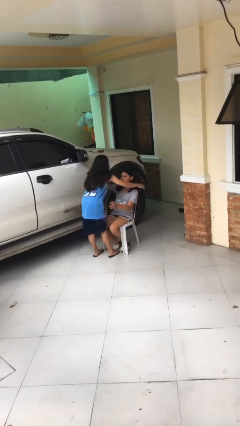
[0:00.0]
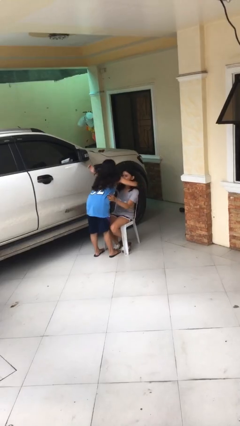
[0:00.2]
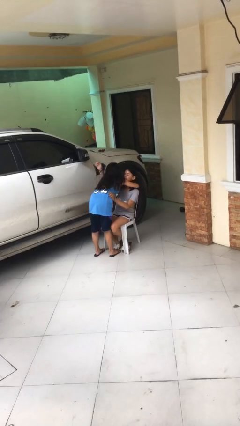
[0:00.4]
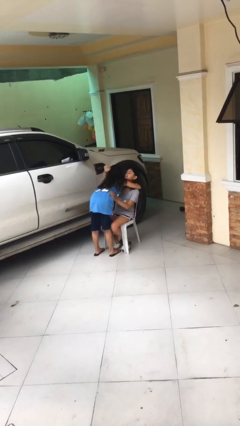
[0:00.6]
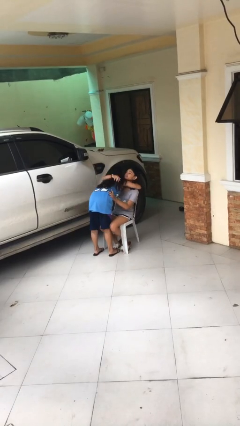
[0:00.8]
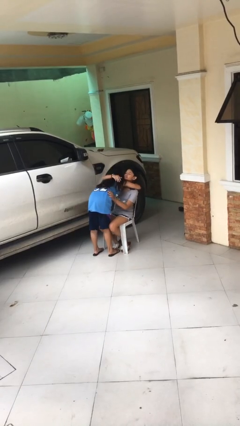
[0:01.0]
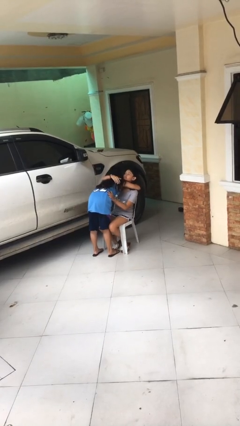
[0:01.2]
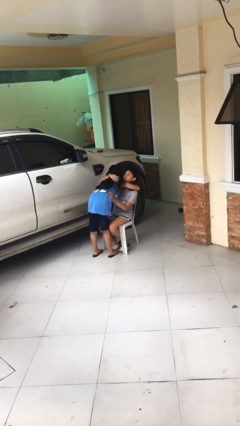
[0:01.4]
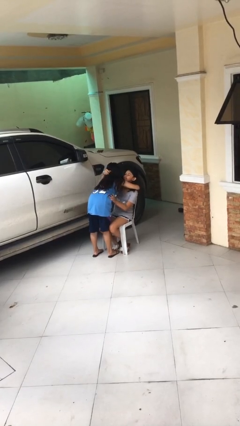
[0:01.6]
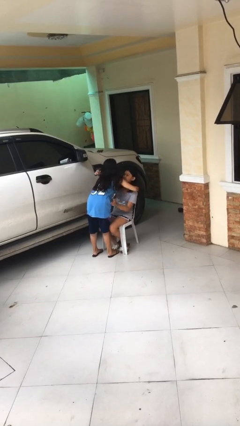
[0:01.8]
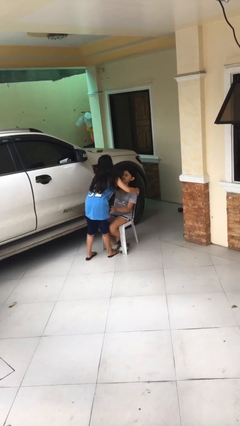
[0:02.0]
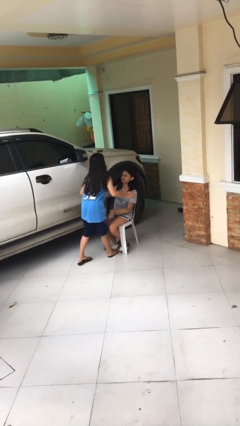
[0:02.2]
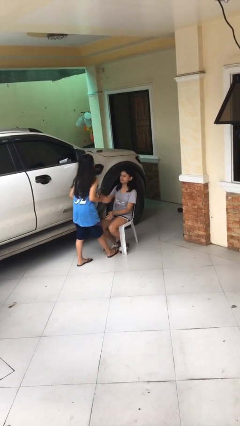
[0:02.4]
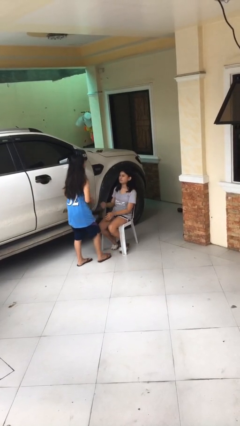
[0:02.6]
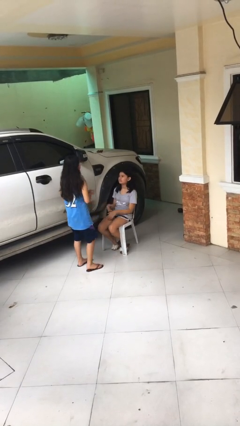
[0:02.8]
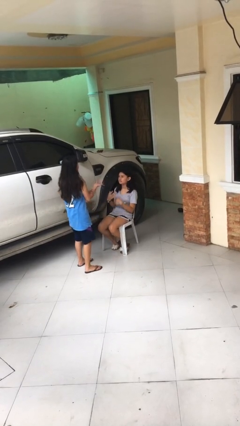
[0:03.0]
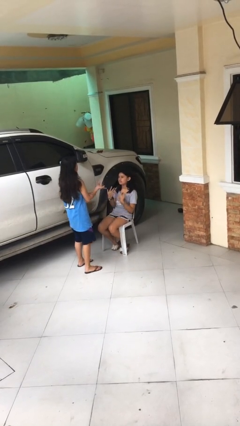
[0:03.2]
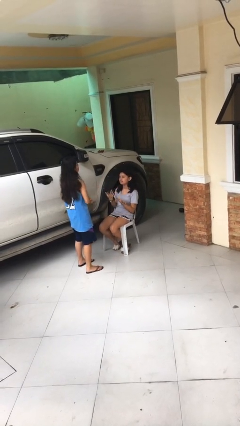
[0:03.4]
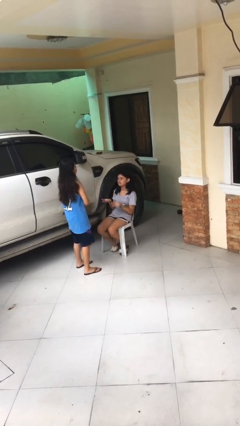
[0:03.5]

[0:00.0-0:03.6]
person embraces person

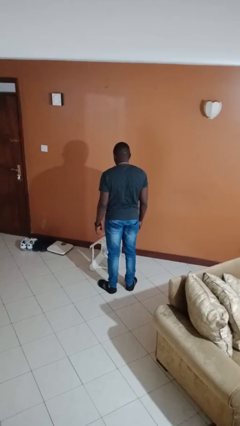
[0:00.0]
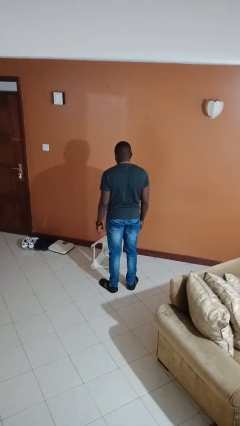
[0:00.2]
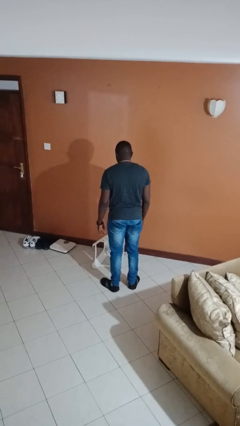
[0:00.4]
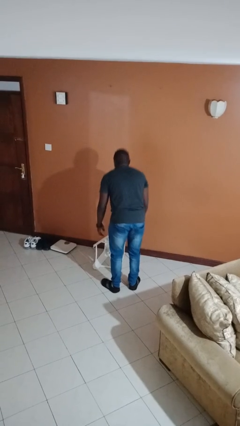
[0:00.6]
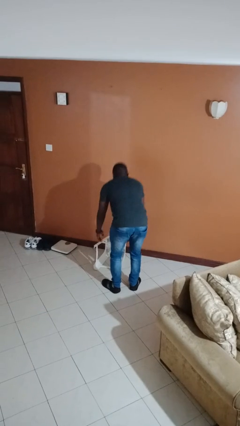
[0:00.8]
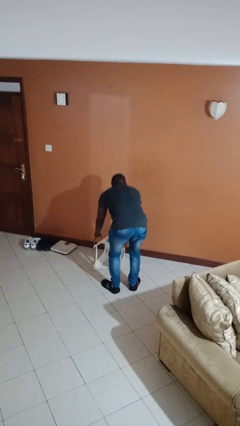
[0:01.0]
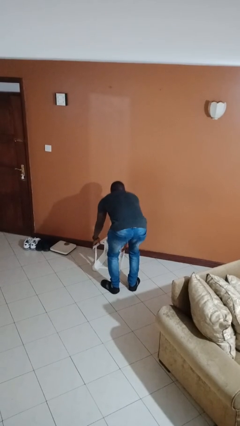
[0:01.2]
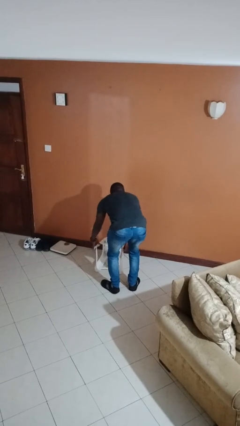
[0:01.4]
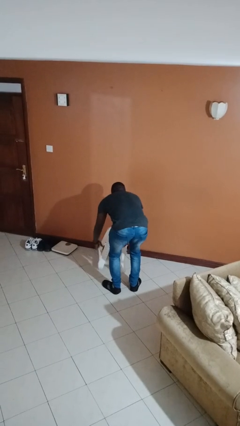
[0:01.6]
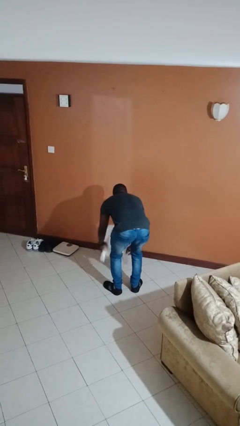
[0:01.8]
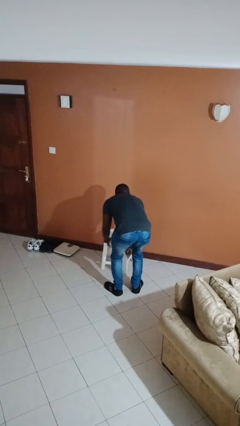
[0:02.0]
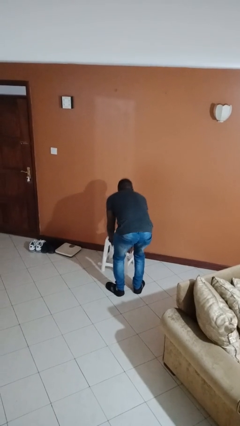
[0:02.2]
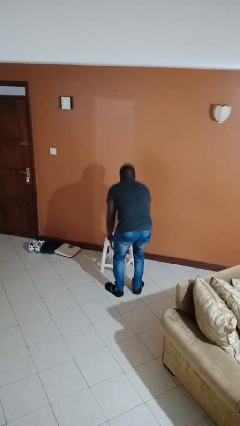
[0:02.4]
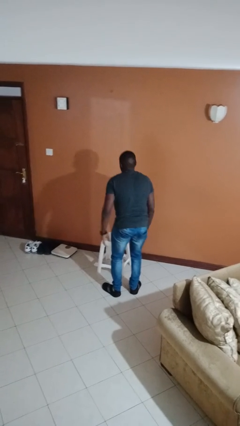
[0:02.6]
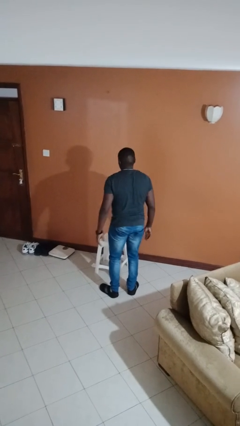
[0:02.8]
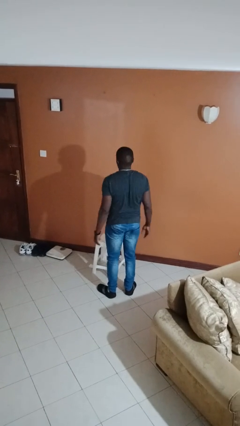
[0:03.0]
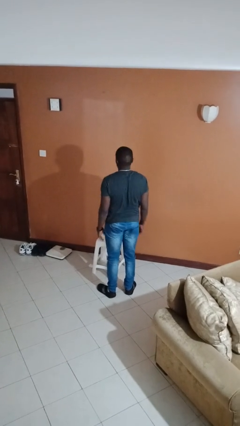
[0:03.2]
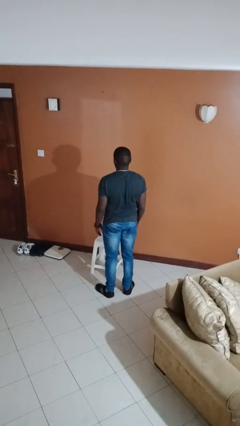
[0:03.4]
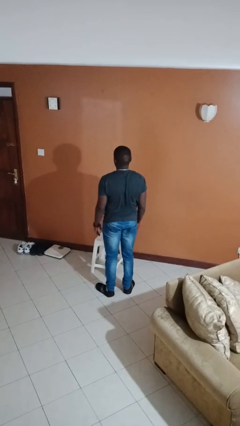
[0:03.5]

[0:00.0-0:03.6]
person sets upright furniture

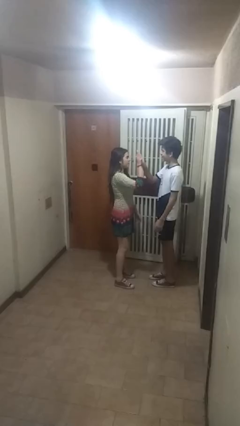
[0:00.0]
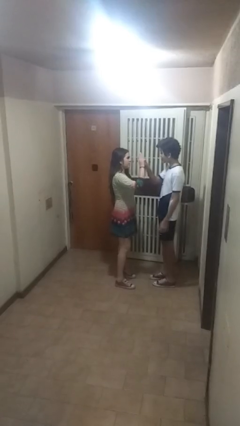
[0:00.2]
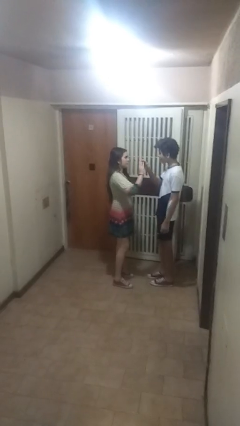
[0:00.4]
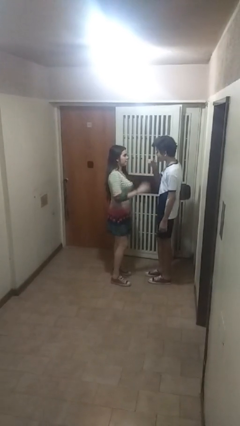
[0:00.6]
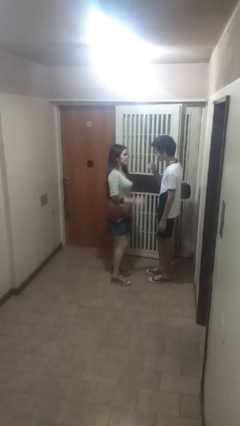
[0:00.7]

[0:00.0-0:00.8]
person highfives hand

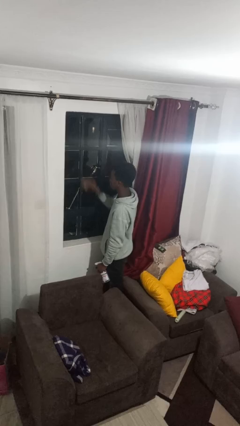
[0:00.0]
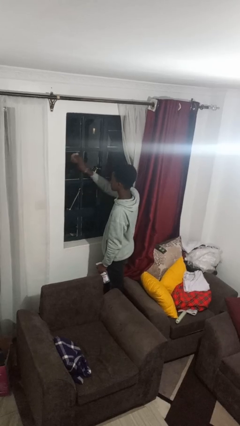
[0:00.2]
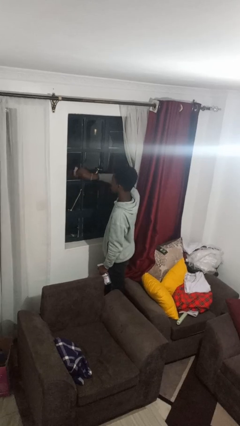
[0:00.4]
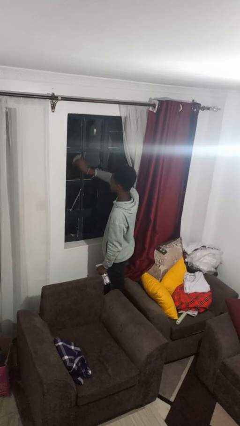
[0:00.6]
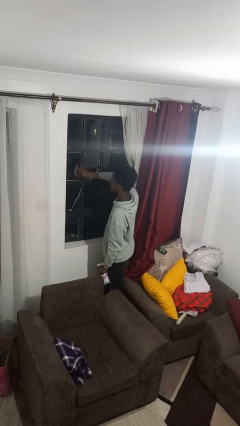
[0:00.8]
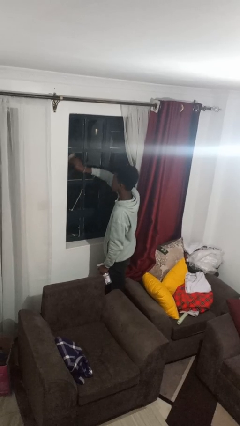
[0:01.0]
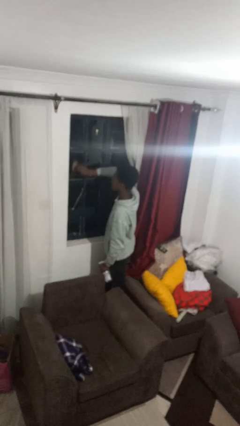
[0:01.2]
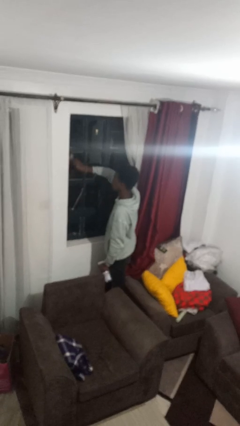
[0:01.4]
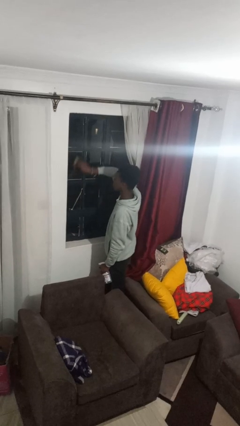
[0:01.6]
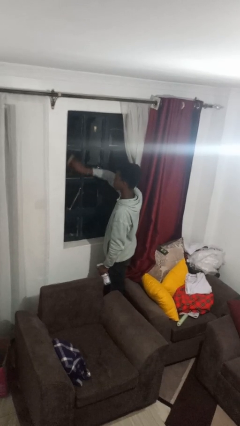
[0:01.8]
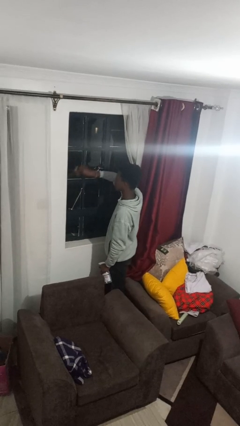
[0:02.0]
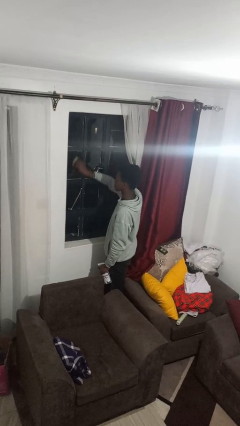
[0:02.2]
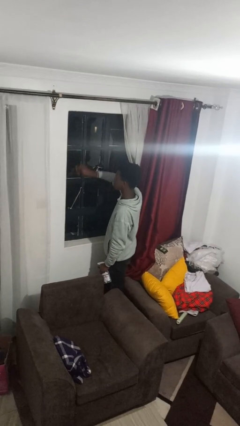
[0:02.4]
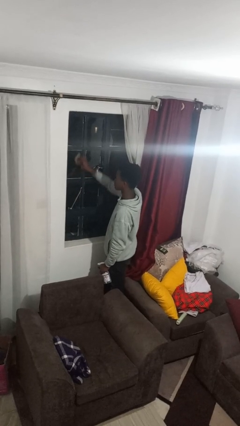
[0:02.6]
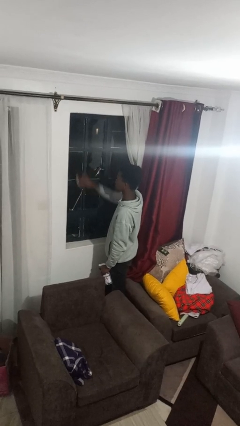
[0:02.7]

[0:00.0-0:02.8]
person washes window

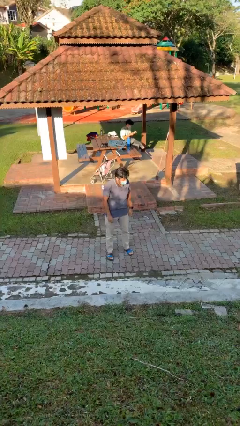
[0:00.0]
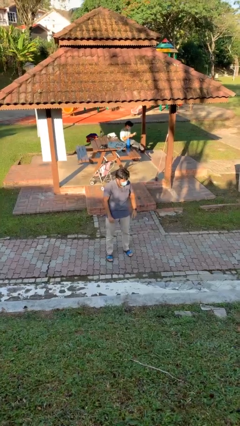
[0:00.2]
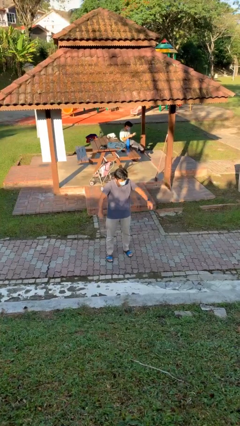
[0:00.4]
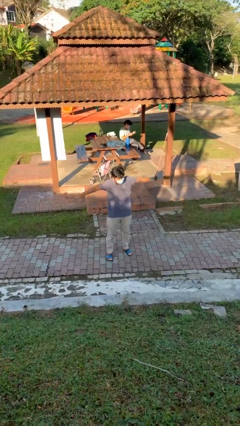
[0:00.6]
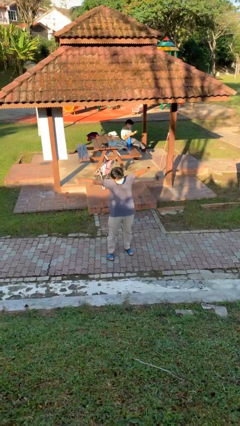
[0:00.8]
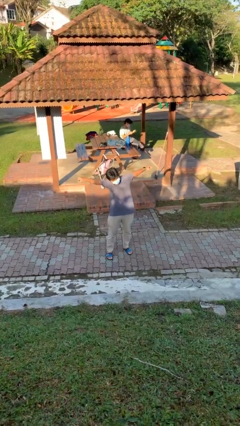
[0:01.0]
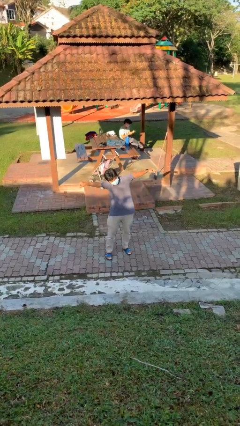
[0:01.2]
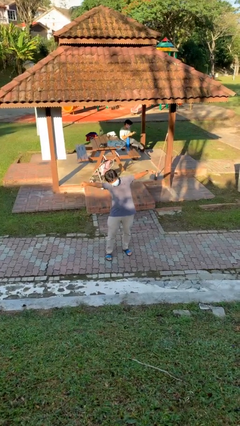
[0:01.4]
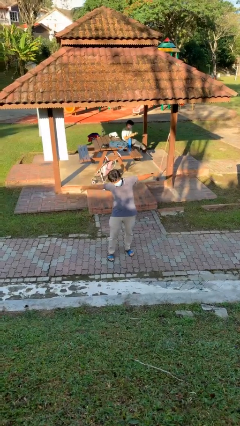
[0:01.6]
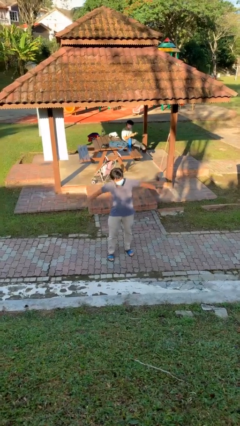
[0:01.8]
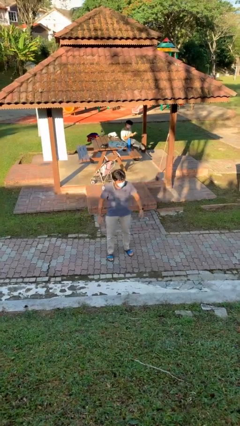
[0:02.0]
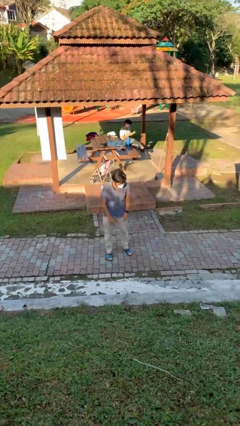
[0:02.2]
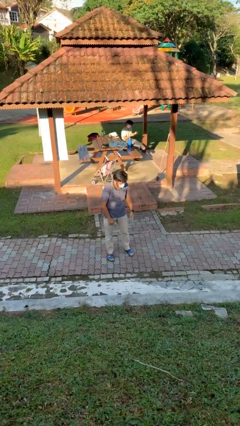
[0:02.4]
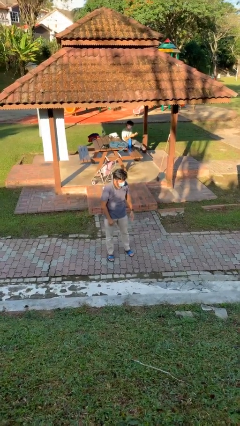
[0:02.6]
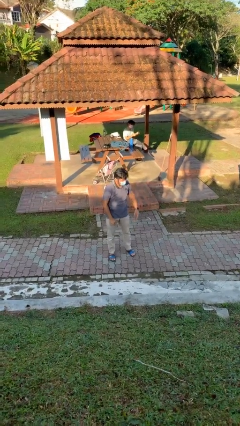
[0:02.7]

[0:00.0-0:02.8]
person stretches arms to side

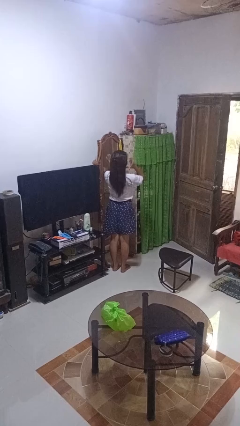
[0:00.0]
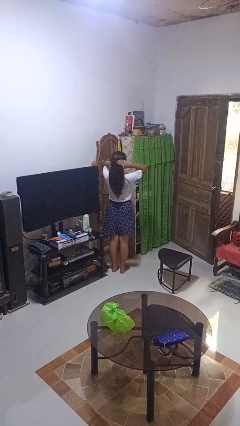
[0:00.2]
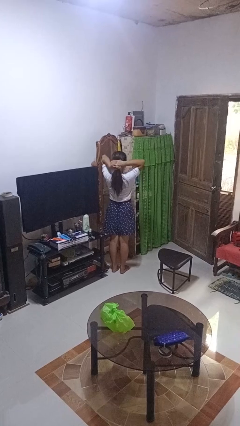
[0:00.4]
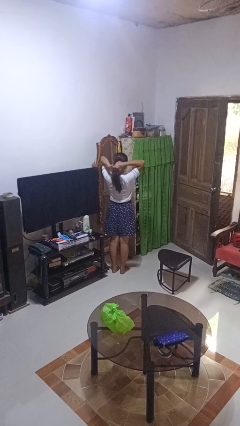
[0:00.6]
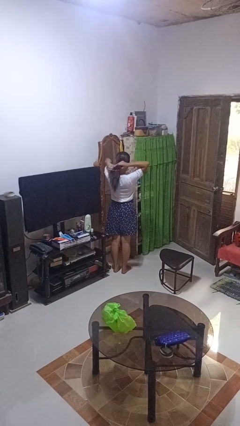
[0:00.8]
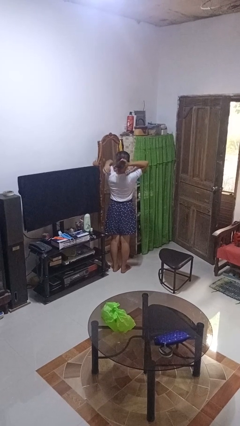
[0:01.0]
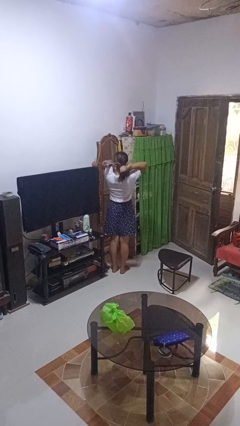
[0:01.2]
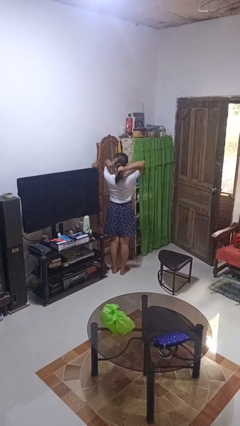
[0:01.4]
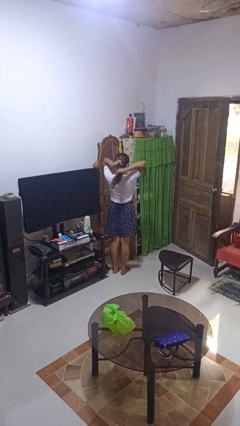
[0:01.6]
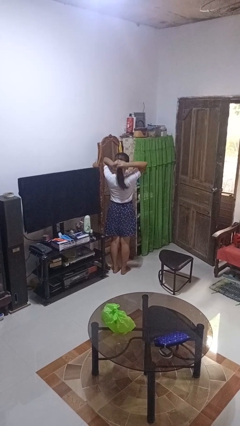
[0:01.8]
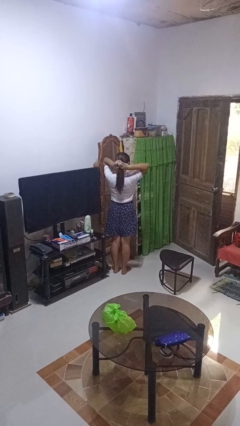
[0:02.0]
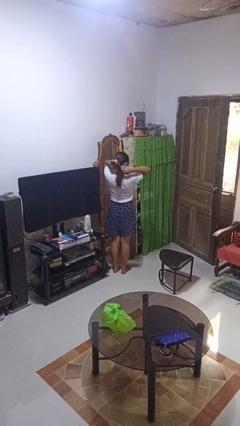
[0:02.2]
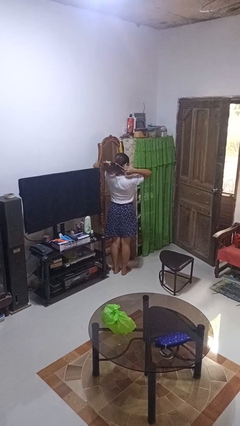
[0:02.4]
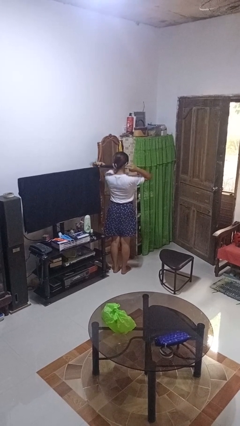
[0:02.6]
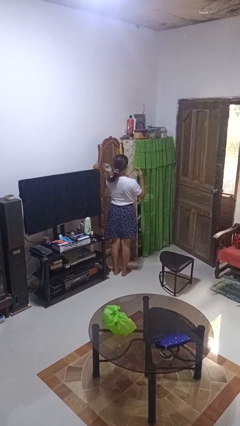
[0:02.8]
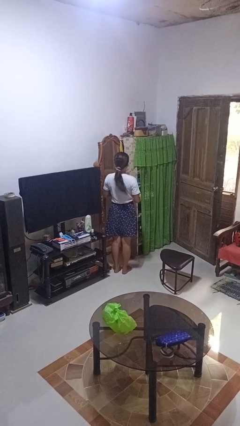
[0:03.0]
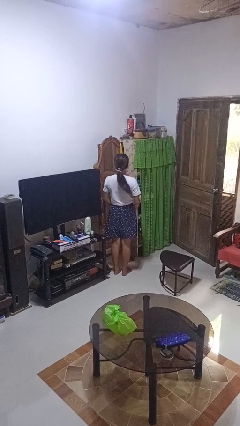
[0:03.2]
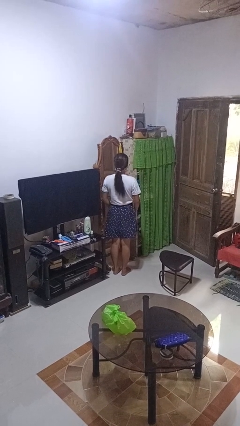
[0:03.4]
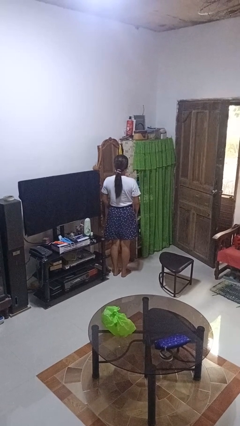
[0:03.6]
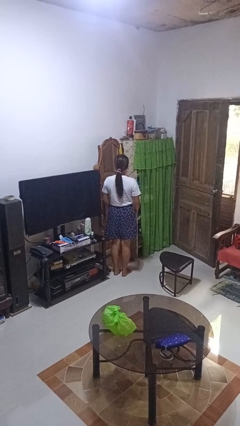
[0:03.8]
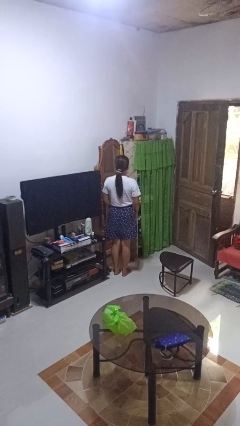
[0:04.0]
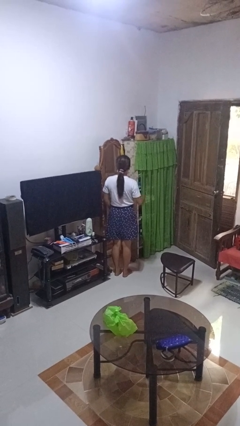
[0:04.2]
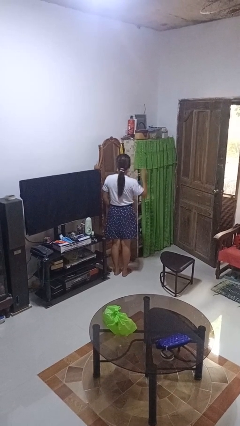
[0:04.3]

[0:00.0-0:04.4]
person puts hair in ponytail
